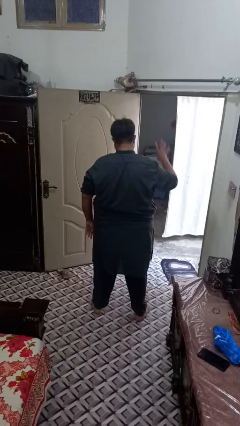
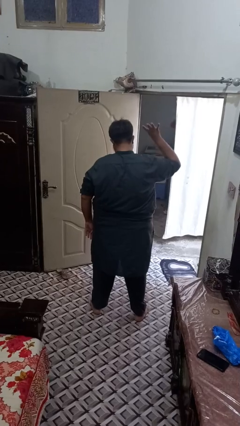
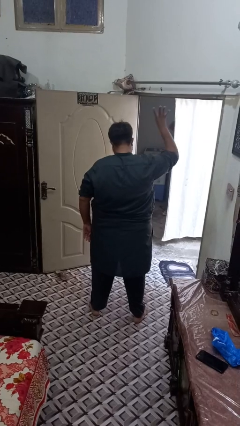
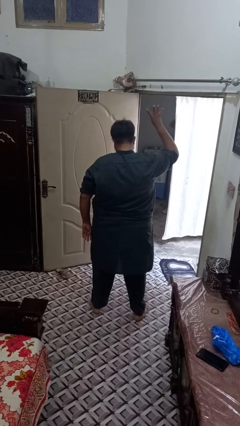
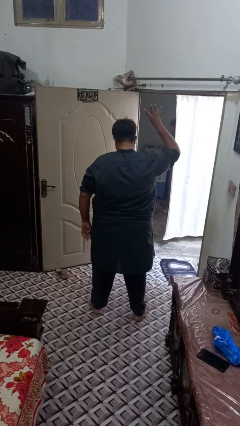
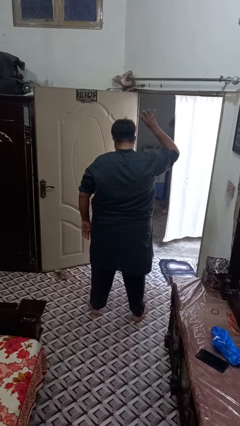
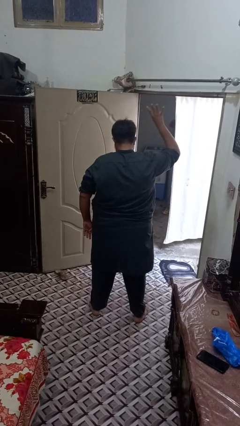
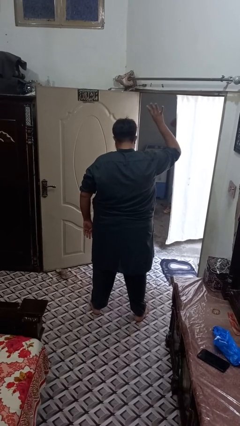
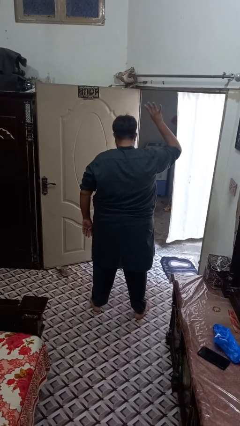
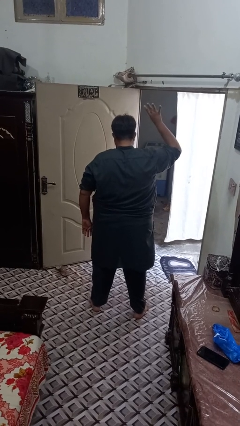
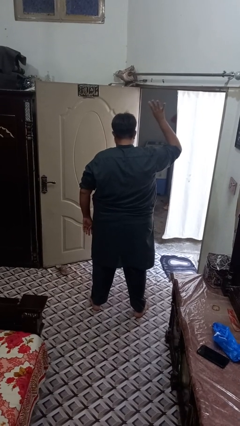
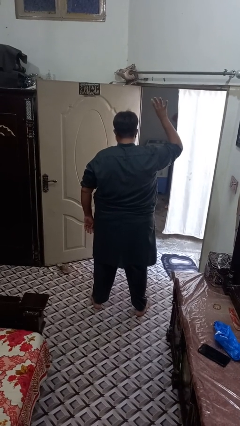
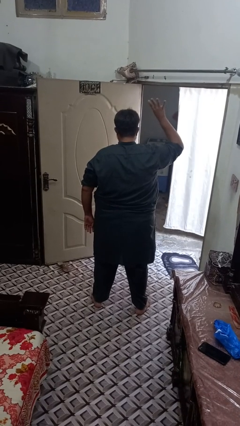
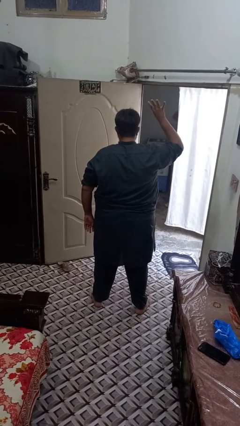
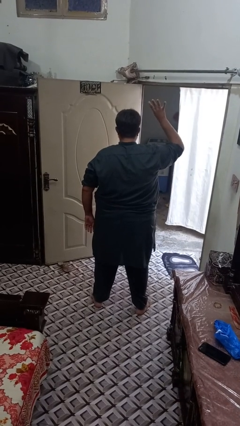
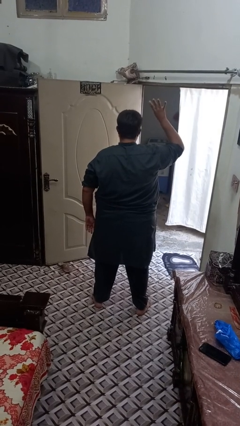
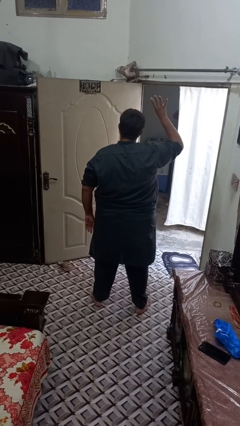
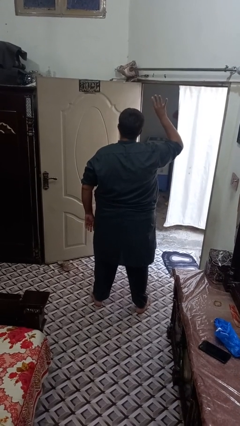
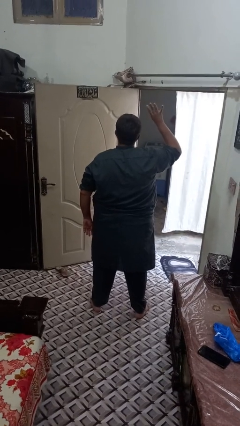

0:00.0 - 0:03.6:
person gestures number four

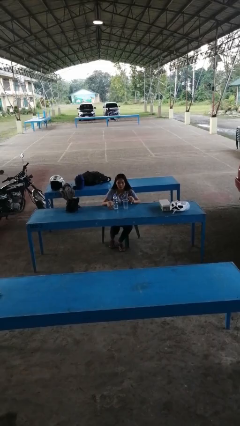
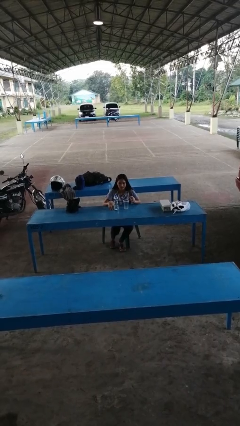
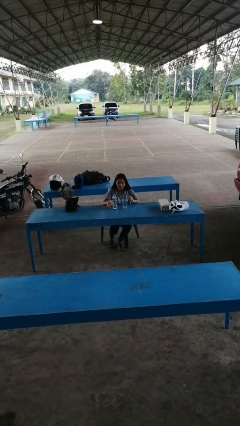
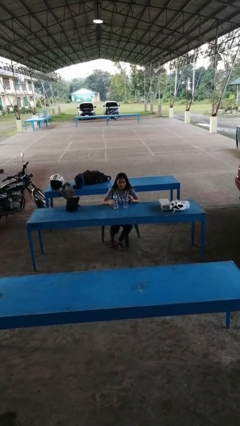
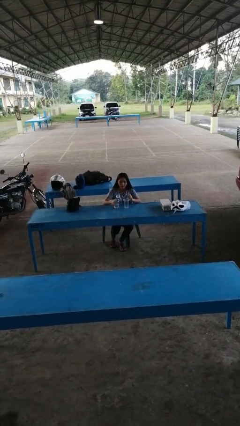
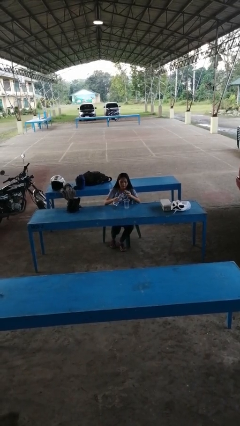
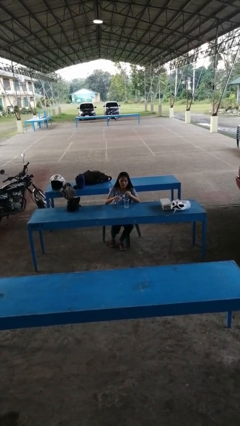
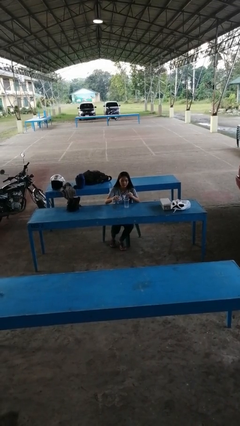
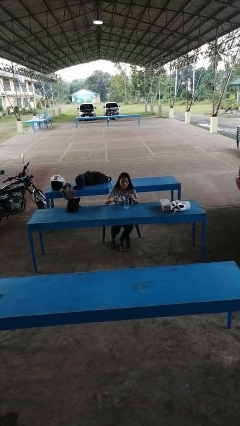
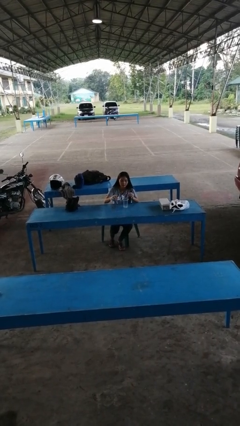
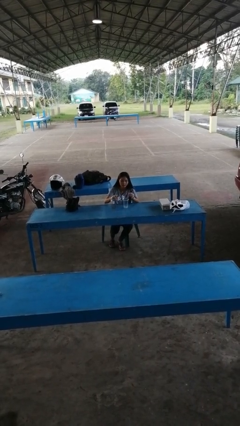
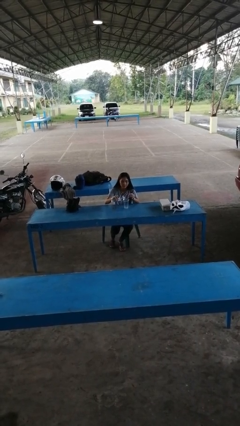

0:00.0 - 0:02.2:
person pours liquid into cup

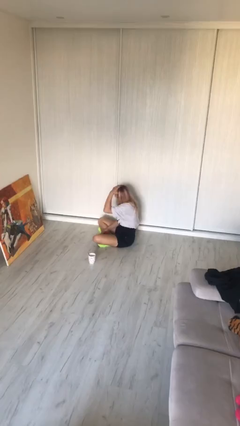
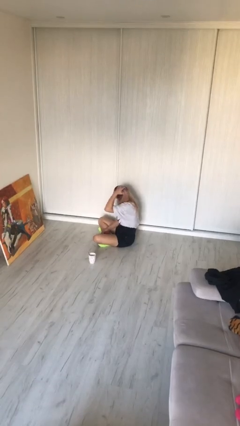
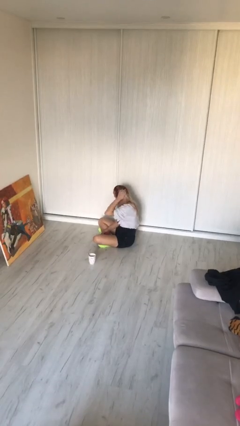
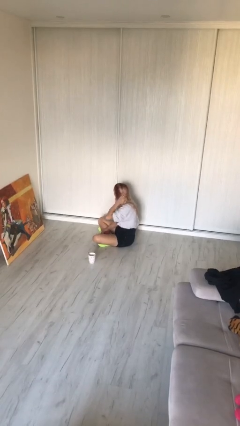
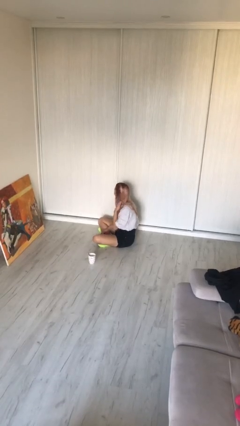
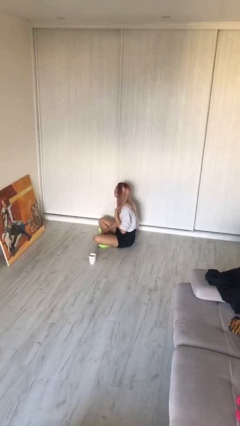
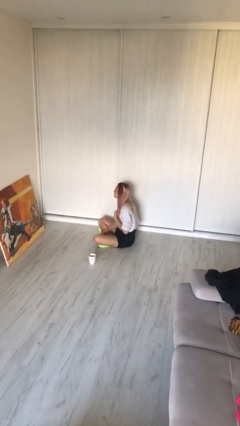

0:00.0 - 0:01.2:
person strokes hair

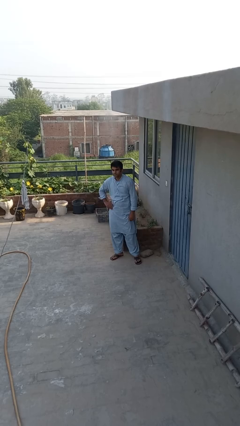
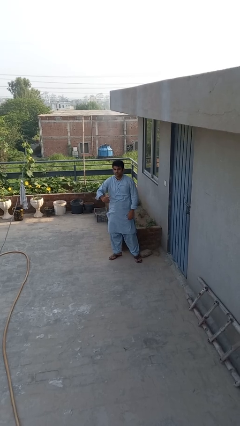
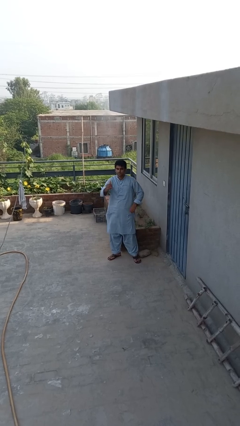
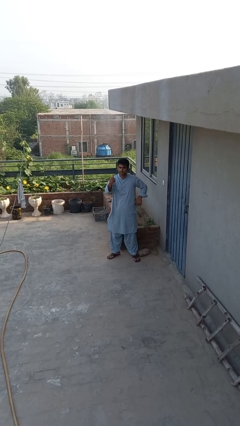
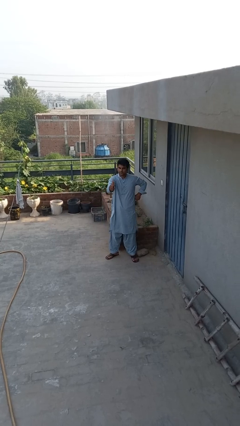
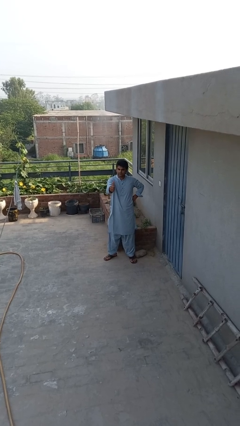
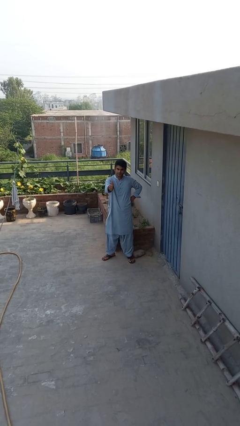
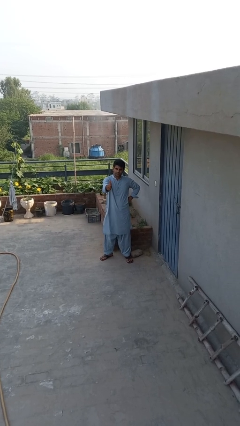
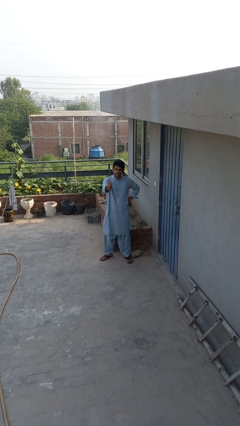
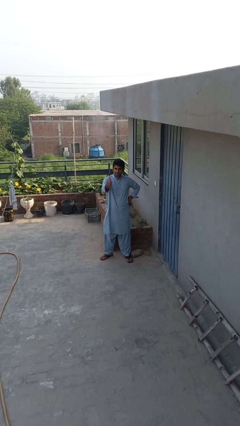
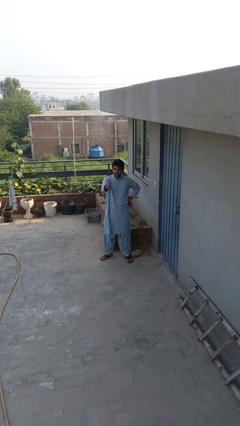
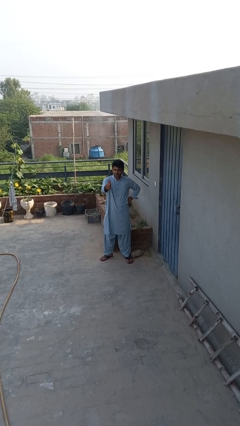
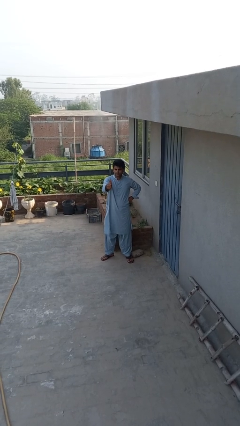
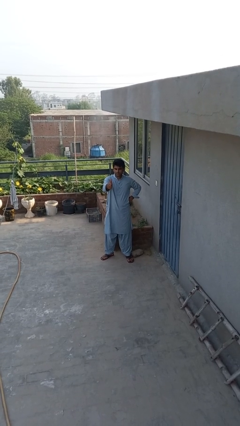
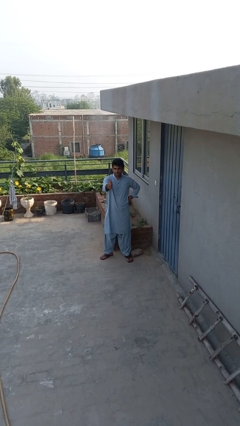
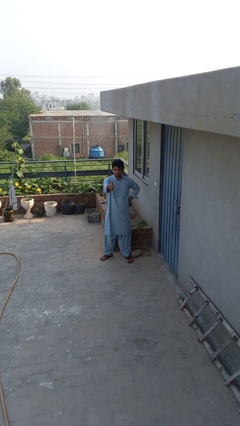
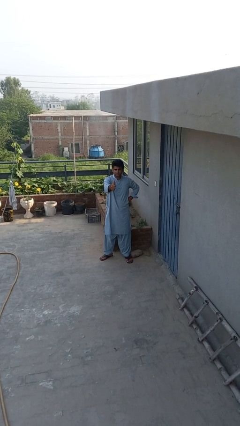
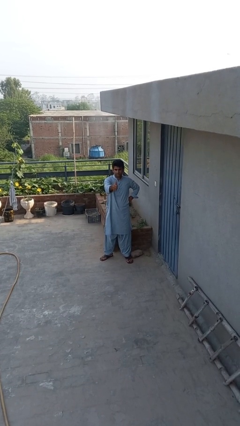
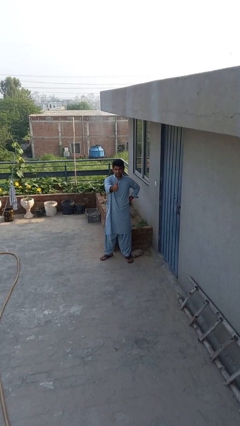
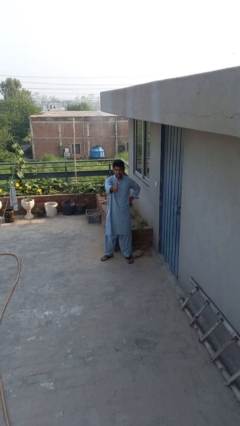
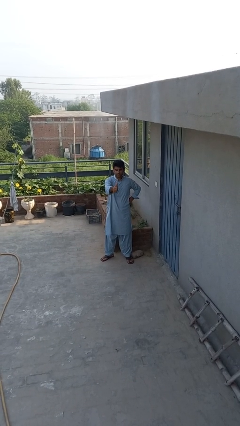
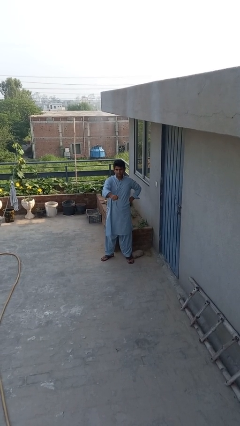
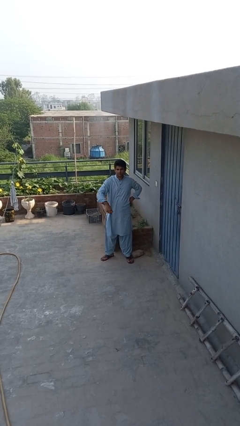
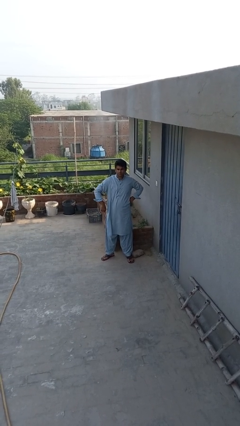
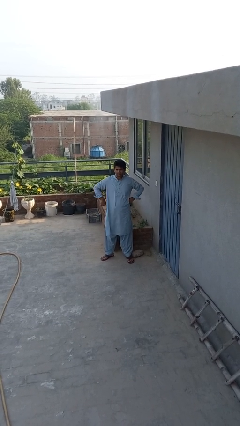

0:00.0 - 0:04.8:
person gestures thumbs up

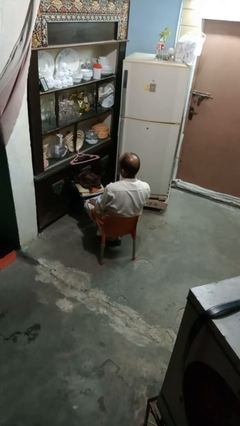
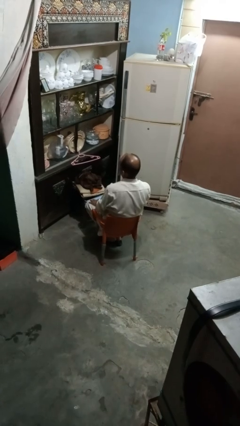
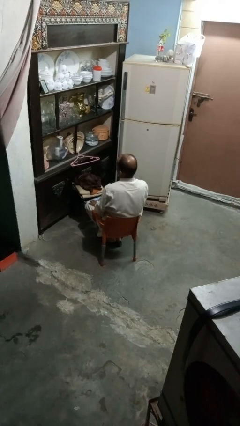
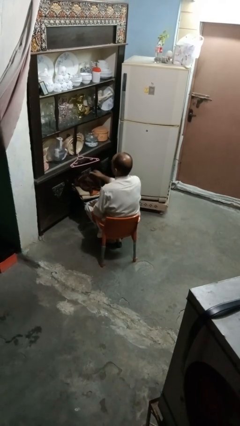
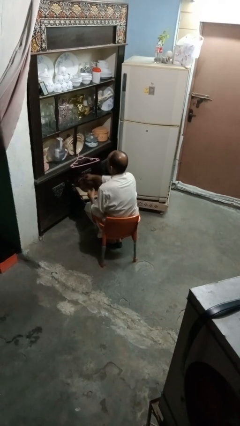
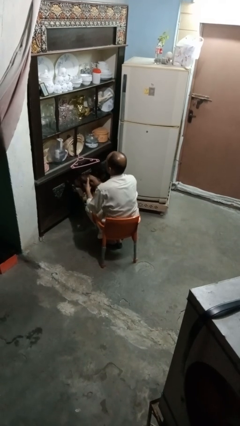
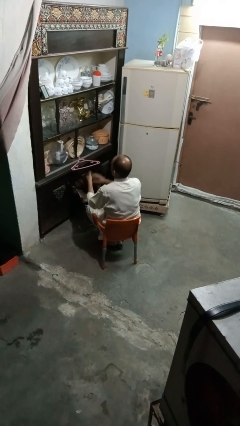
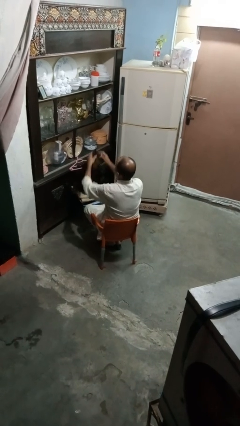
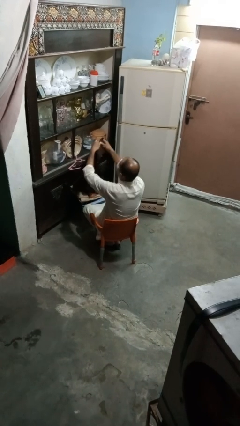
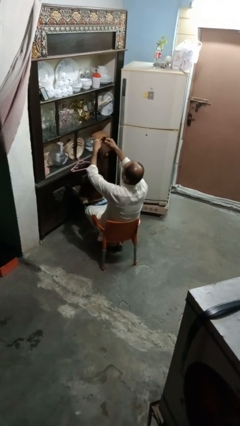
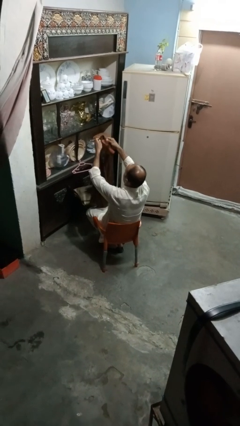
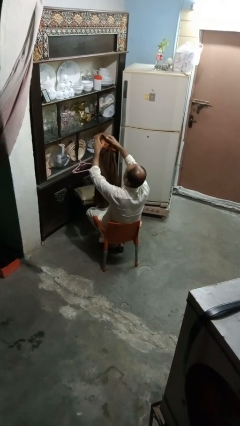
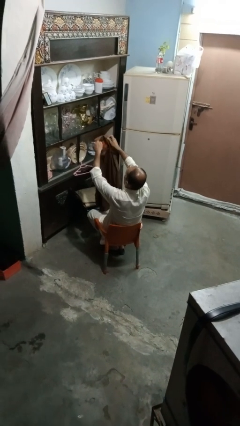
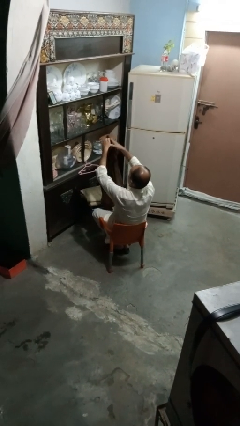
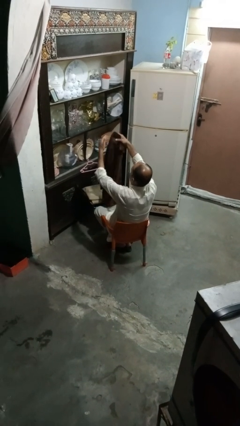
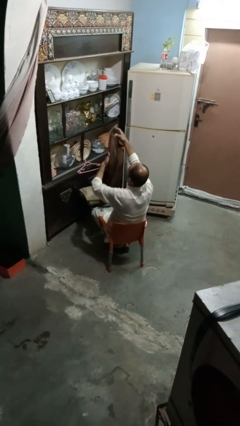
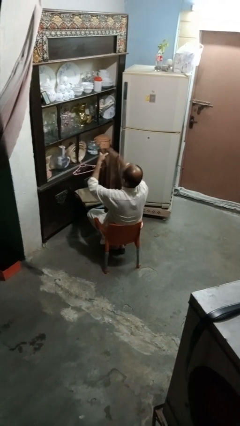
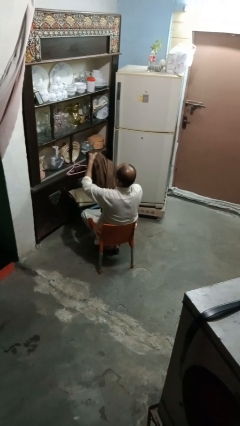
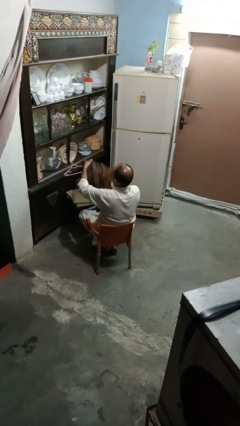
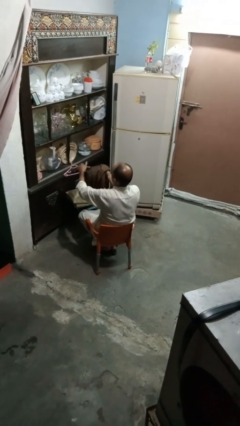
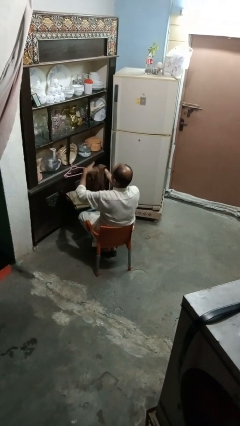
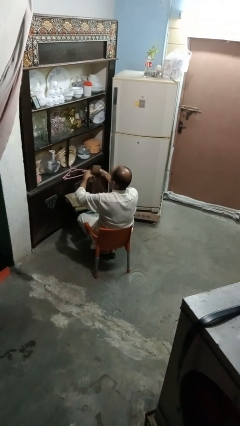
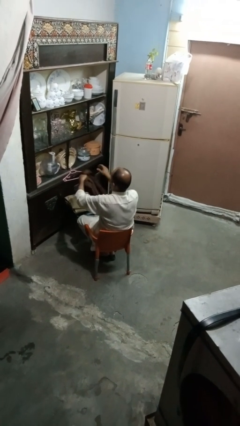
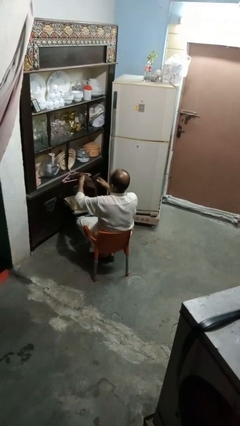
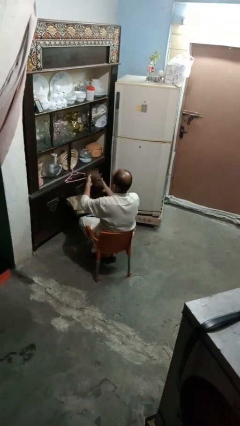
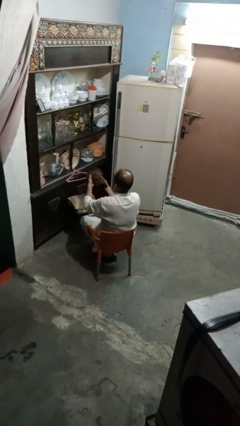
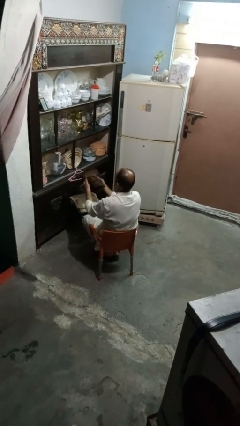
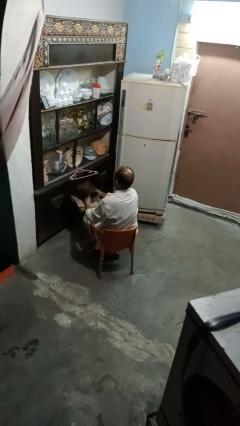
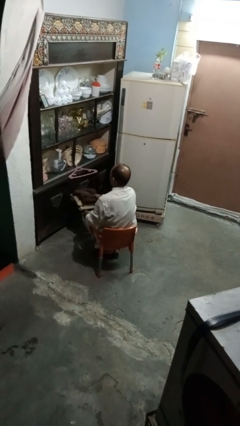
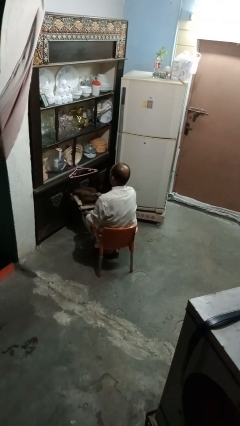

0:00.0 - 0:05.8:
person folds shirt
